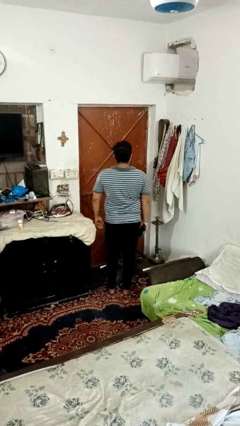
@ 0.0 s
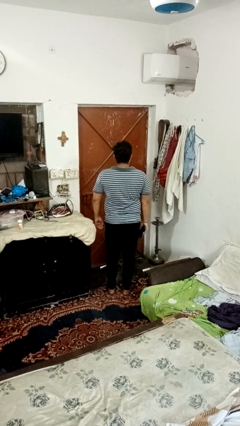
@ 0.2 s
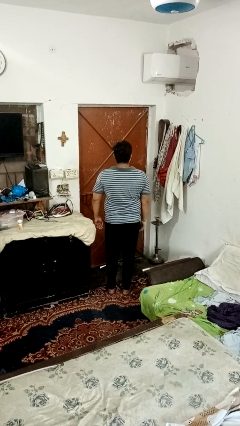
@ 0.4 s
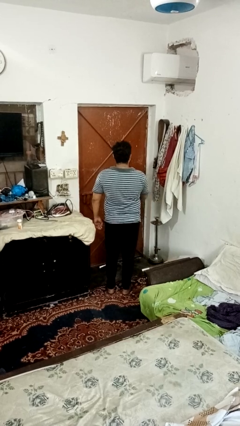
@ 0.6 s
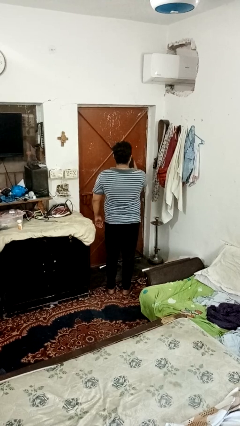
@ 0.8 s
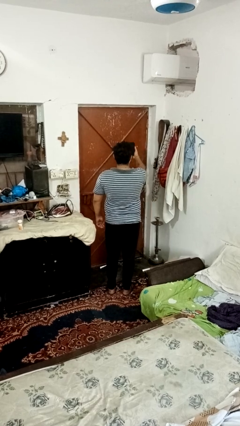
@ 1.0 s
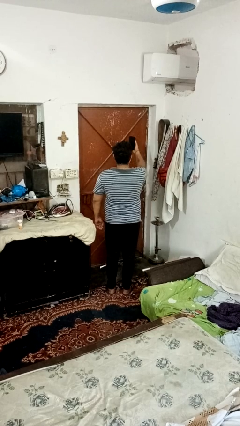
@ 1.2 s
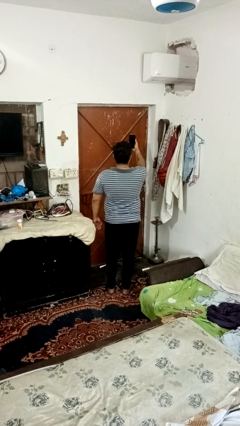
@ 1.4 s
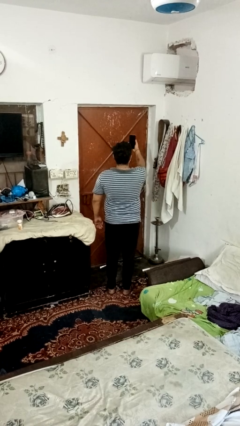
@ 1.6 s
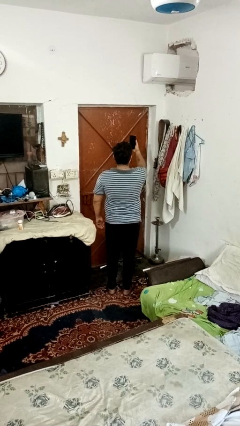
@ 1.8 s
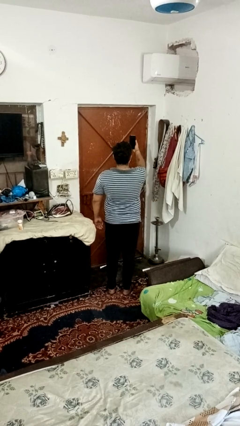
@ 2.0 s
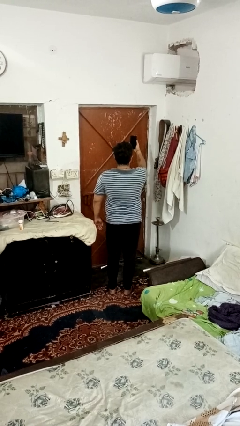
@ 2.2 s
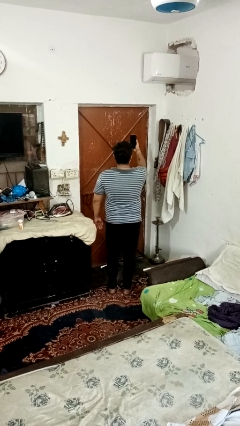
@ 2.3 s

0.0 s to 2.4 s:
person takes selfie

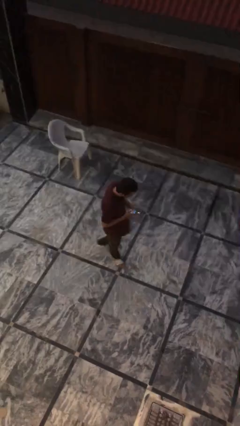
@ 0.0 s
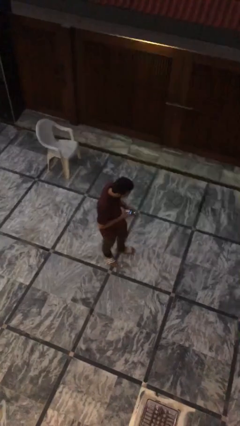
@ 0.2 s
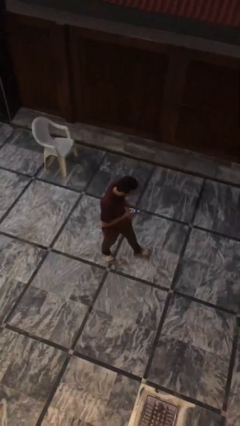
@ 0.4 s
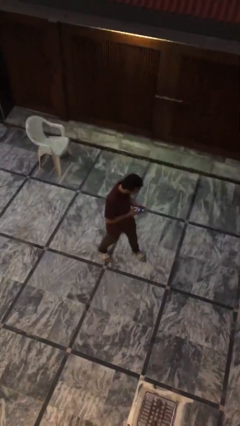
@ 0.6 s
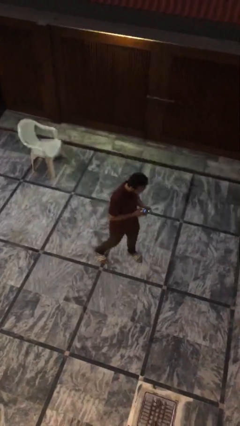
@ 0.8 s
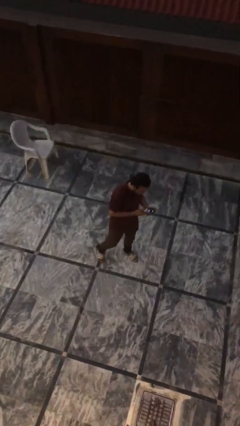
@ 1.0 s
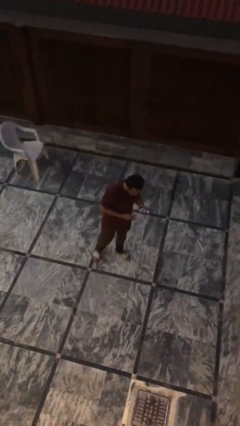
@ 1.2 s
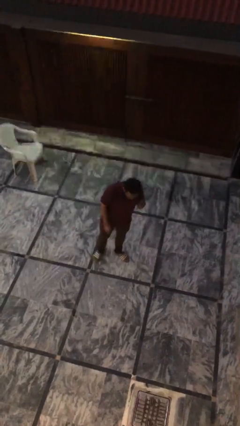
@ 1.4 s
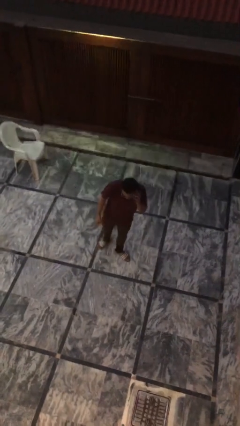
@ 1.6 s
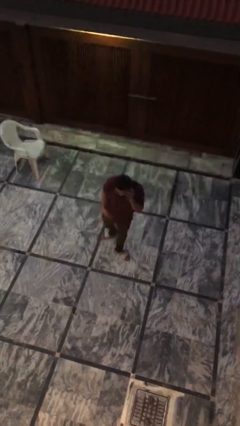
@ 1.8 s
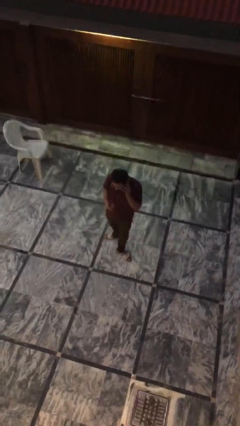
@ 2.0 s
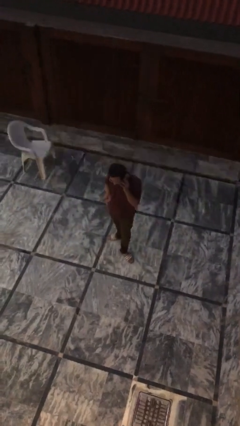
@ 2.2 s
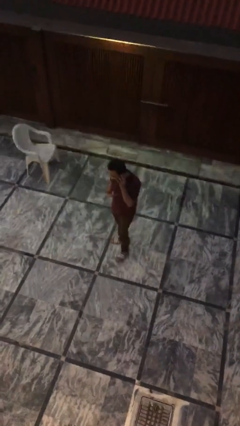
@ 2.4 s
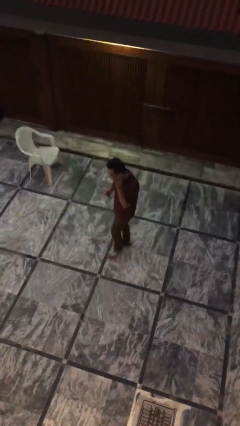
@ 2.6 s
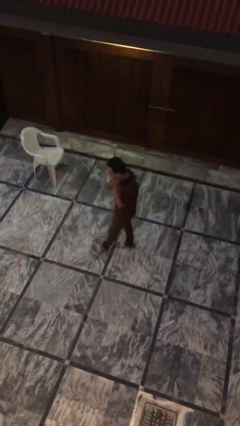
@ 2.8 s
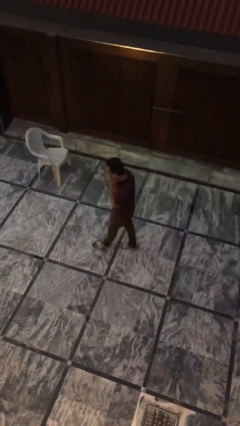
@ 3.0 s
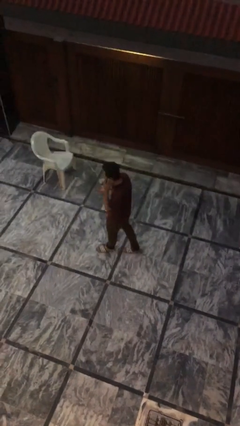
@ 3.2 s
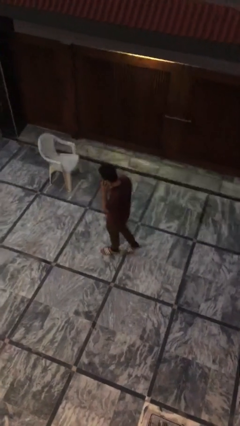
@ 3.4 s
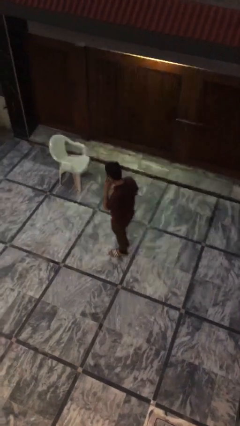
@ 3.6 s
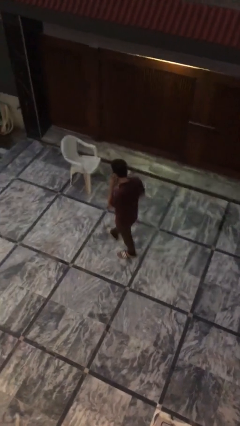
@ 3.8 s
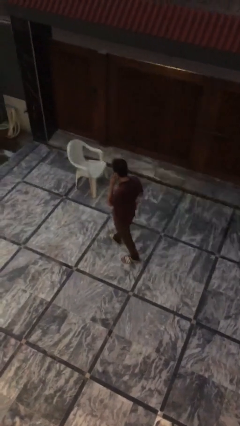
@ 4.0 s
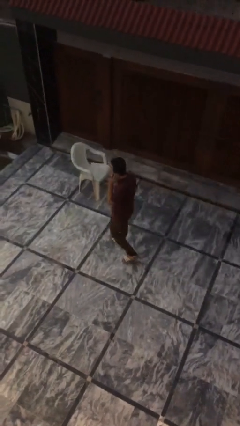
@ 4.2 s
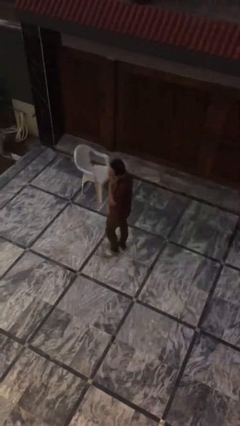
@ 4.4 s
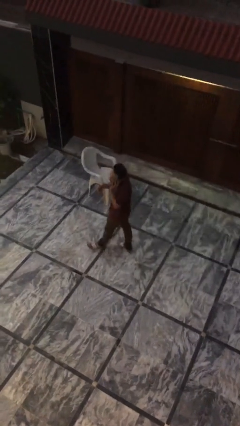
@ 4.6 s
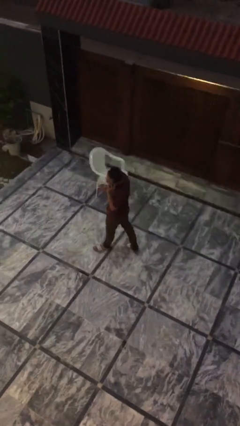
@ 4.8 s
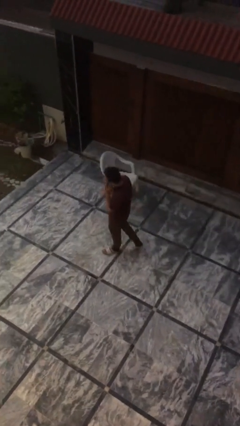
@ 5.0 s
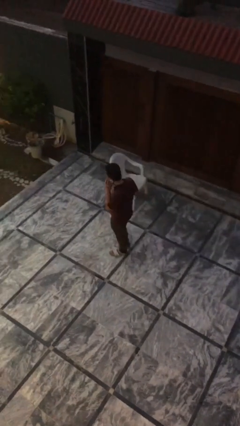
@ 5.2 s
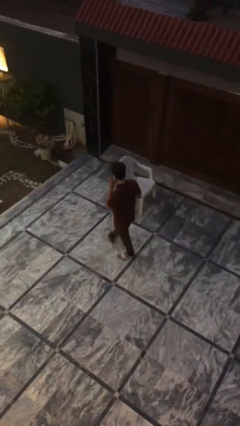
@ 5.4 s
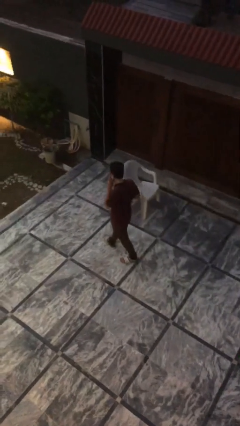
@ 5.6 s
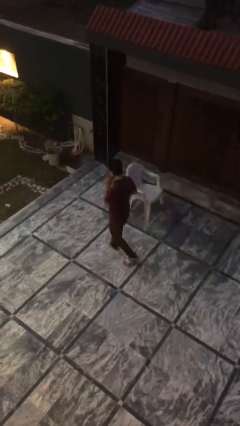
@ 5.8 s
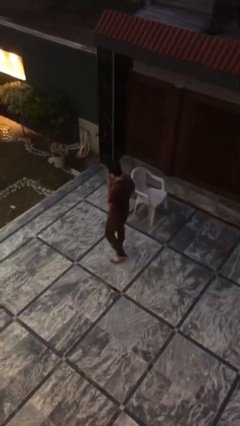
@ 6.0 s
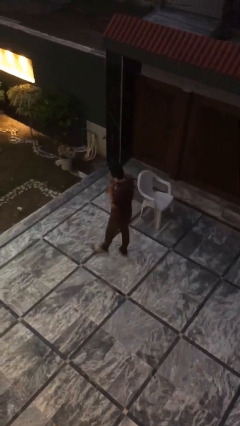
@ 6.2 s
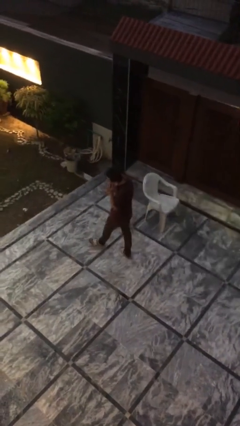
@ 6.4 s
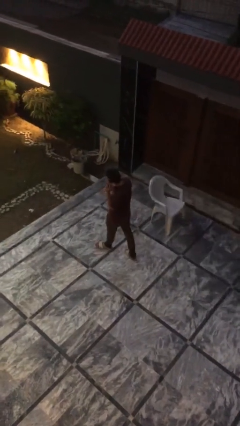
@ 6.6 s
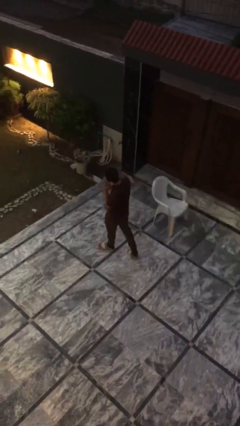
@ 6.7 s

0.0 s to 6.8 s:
person talks on phone

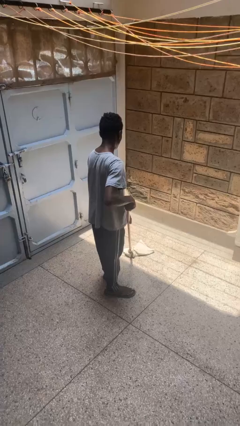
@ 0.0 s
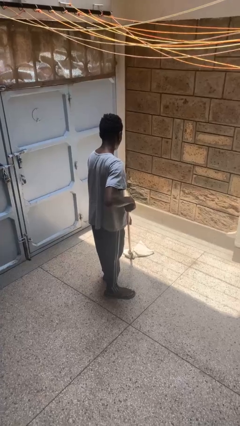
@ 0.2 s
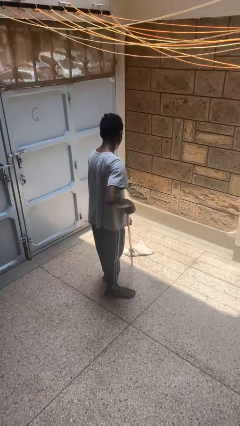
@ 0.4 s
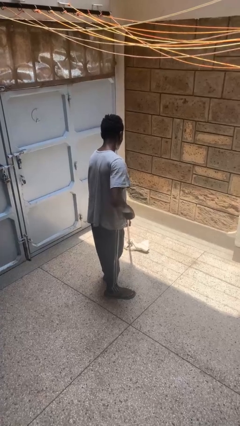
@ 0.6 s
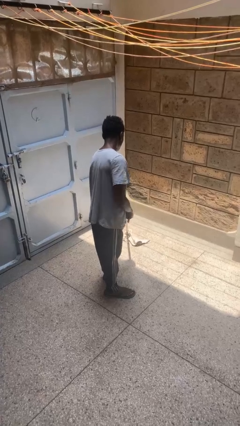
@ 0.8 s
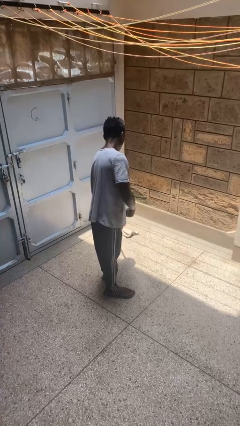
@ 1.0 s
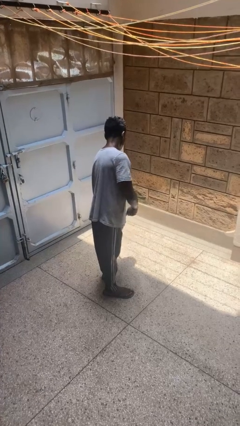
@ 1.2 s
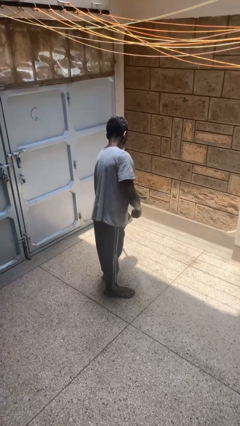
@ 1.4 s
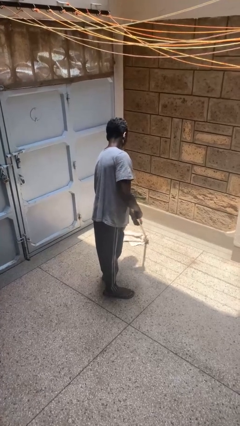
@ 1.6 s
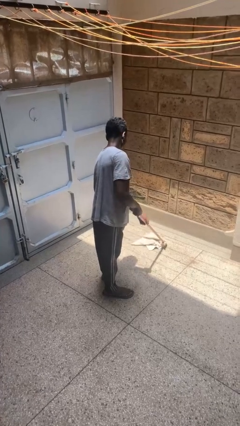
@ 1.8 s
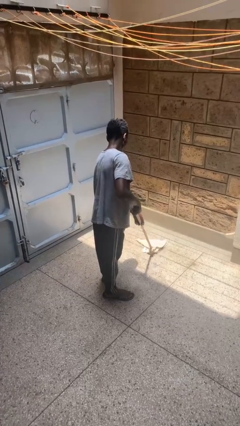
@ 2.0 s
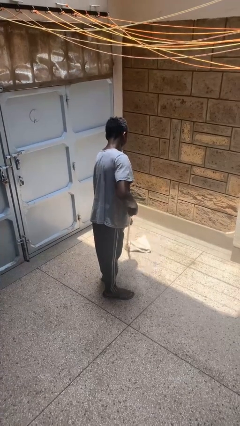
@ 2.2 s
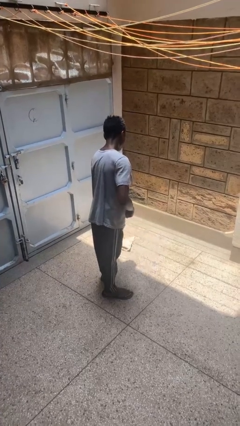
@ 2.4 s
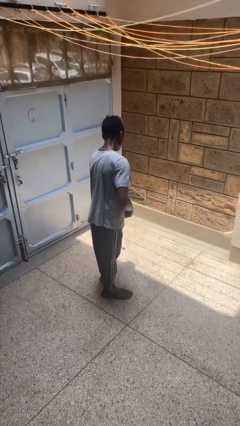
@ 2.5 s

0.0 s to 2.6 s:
person mops

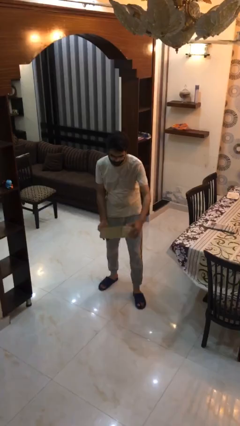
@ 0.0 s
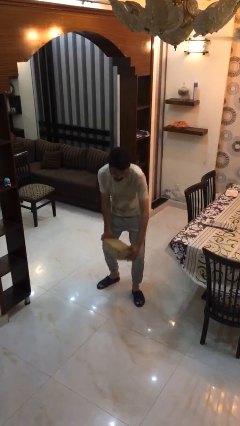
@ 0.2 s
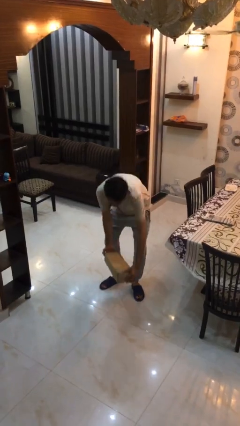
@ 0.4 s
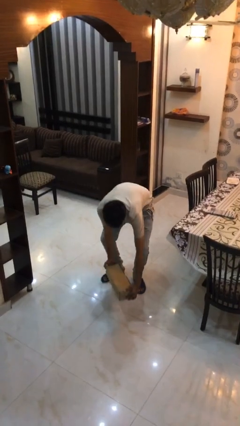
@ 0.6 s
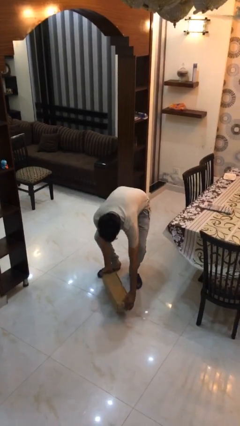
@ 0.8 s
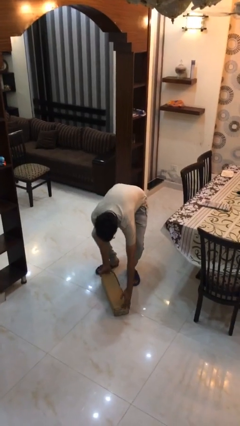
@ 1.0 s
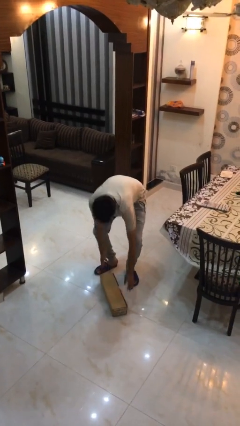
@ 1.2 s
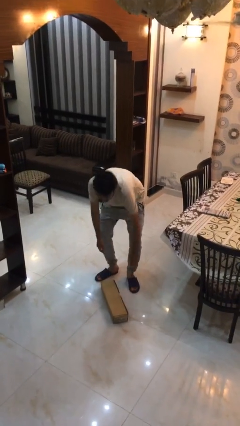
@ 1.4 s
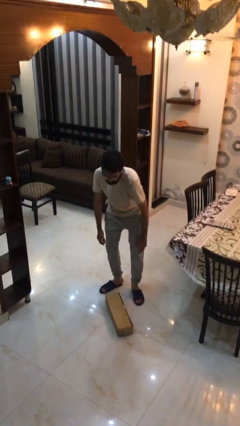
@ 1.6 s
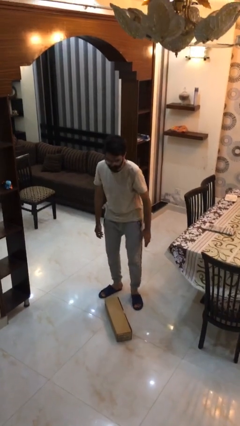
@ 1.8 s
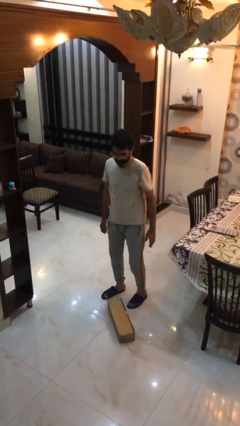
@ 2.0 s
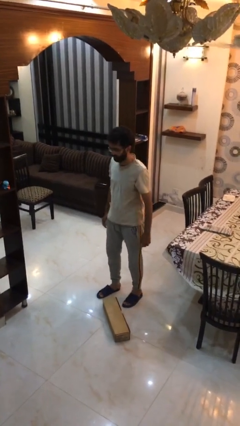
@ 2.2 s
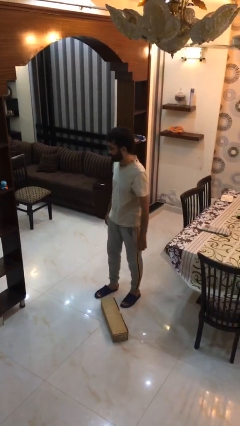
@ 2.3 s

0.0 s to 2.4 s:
person puts down object on floor

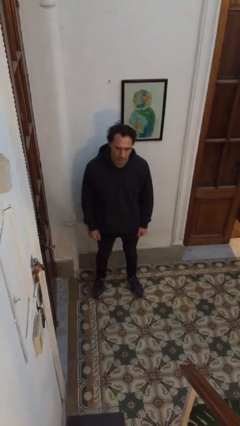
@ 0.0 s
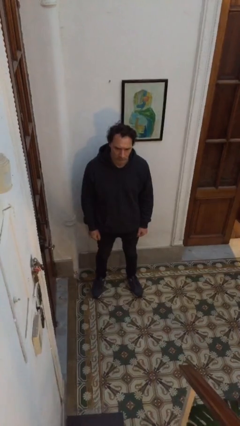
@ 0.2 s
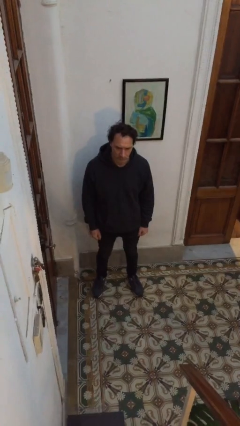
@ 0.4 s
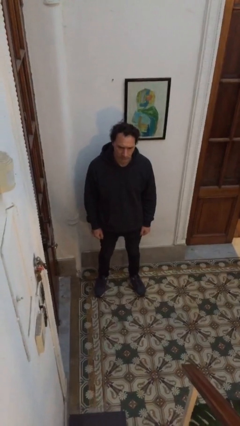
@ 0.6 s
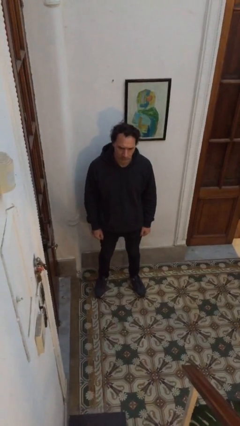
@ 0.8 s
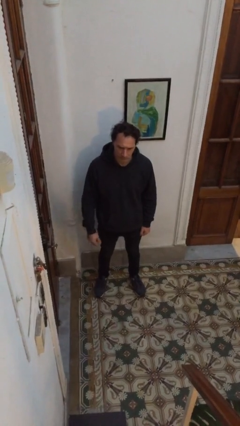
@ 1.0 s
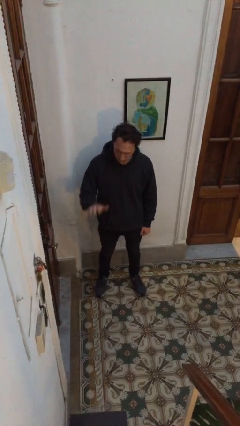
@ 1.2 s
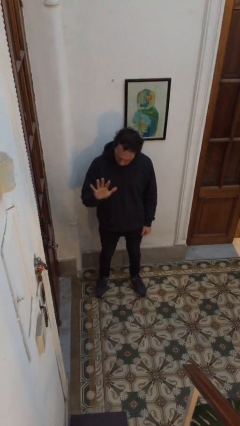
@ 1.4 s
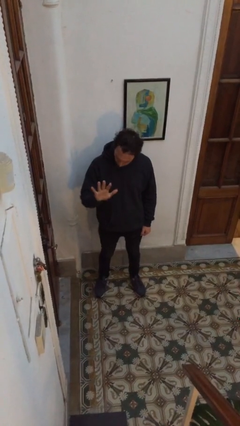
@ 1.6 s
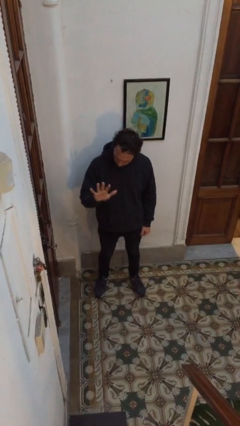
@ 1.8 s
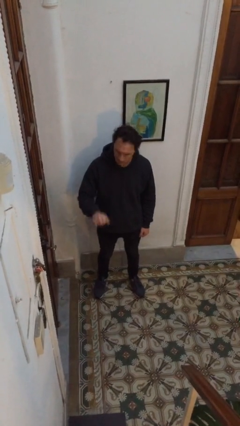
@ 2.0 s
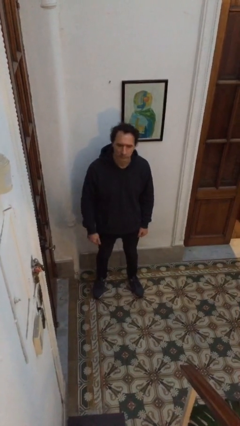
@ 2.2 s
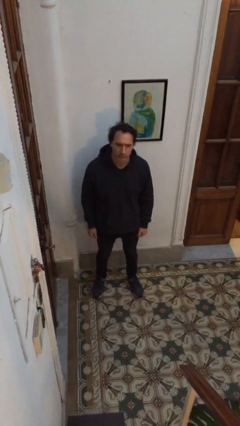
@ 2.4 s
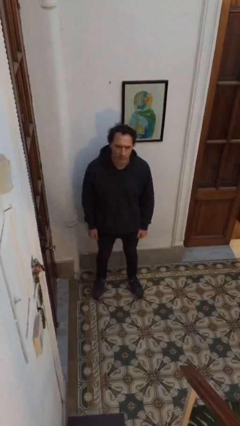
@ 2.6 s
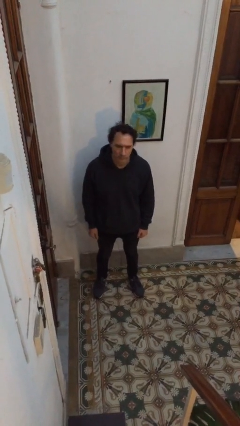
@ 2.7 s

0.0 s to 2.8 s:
person gestures number five

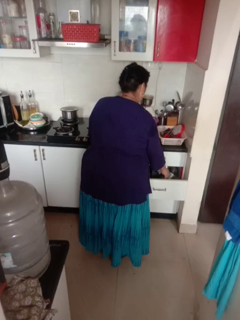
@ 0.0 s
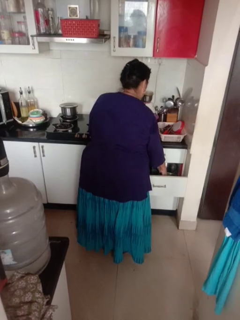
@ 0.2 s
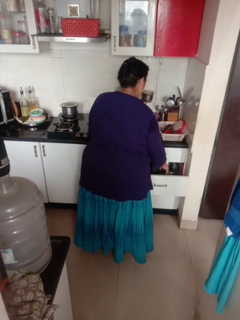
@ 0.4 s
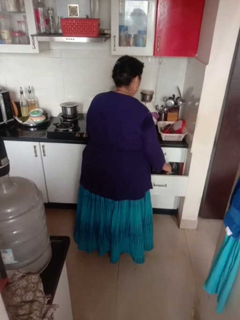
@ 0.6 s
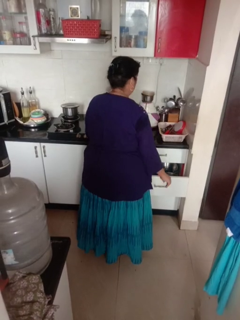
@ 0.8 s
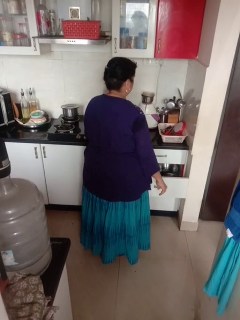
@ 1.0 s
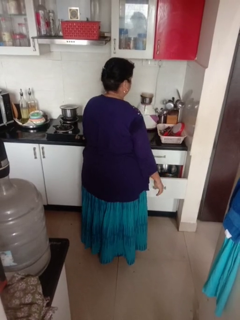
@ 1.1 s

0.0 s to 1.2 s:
person puts object into kitchen drawer
